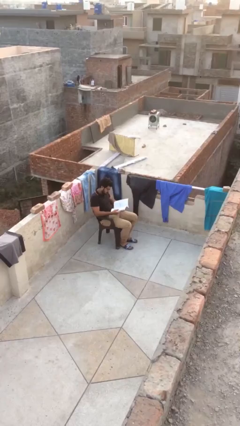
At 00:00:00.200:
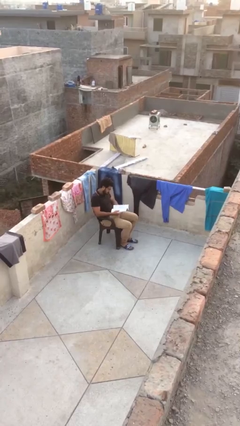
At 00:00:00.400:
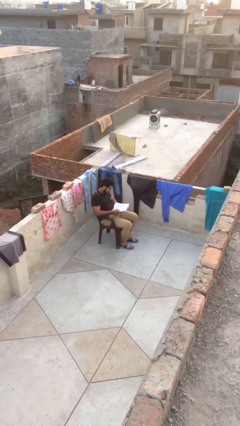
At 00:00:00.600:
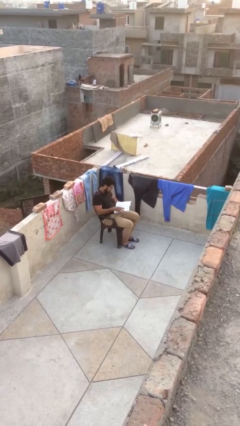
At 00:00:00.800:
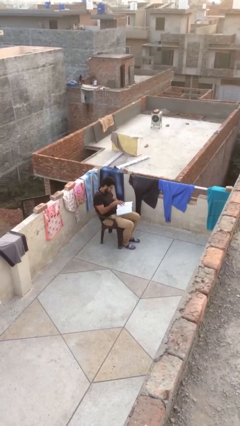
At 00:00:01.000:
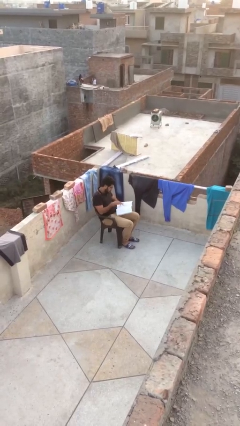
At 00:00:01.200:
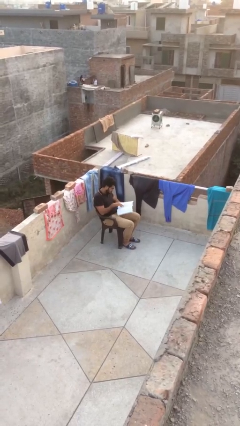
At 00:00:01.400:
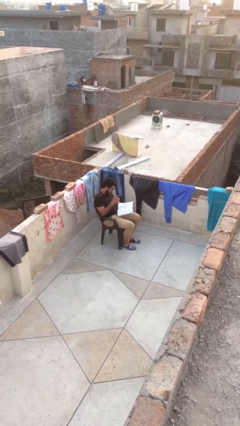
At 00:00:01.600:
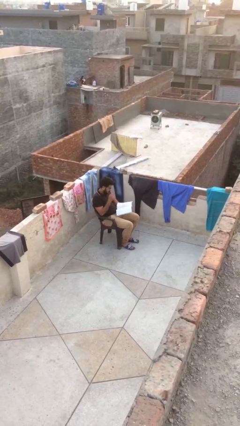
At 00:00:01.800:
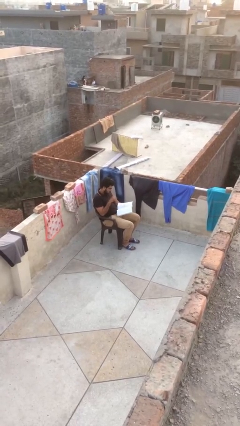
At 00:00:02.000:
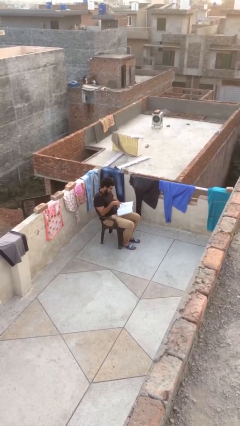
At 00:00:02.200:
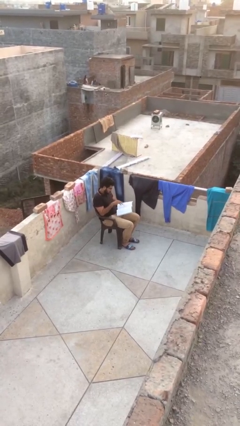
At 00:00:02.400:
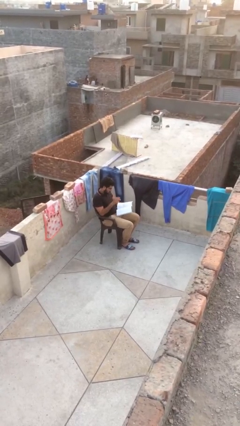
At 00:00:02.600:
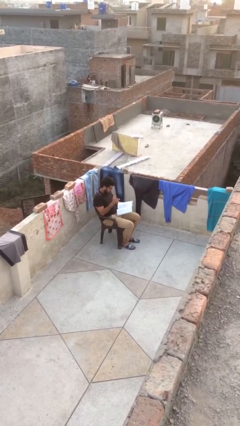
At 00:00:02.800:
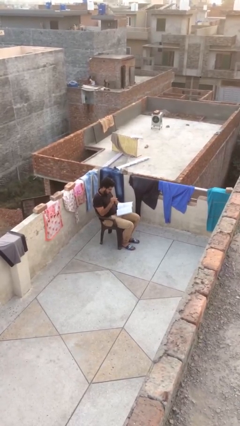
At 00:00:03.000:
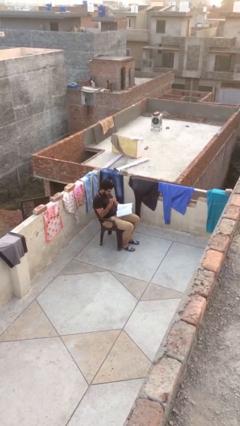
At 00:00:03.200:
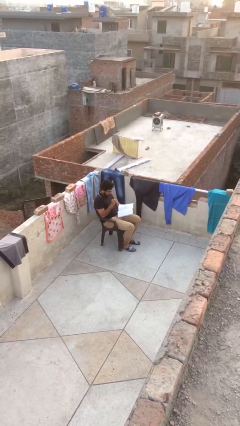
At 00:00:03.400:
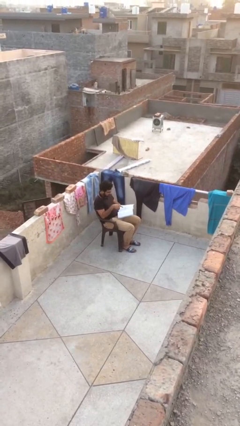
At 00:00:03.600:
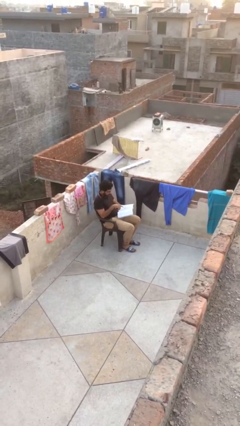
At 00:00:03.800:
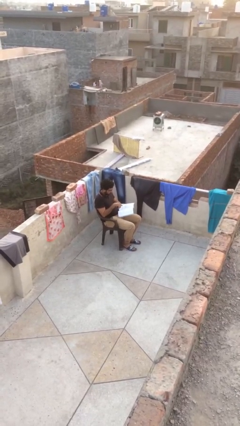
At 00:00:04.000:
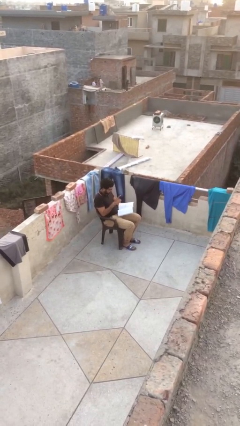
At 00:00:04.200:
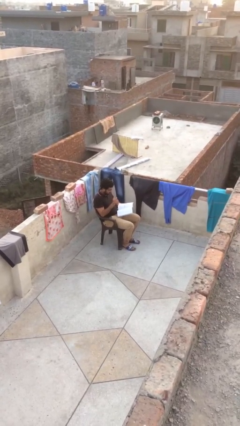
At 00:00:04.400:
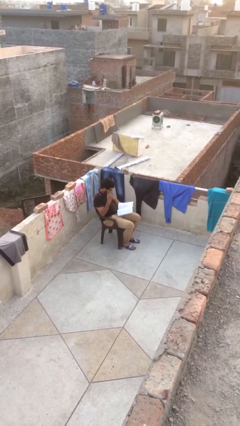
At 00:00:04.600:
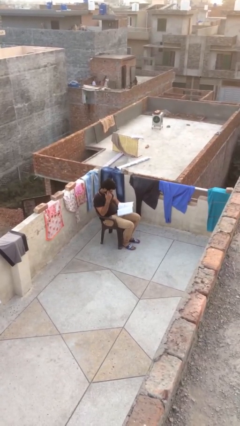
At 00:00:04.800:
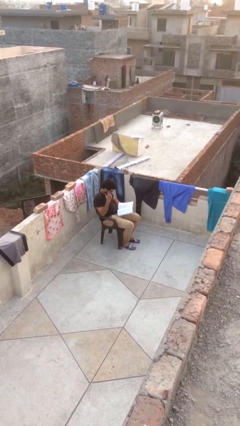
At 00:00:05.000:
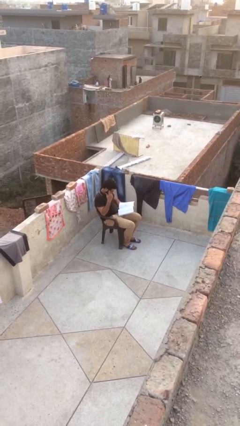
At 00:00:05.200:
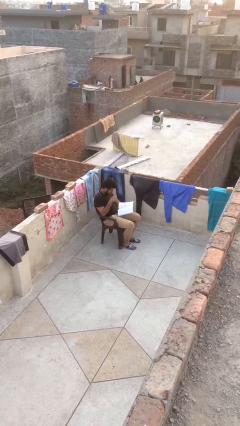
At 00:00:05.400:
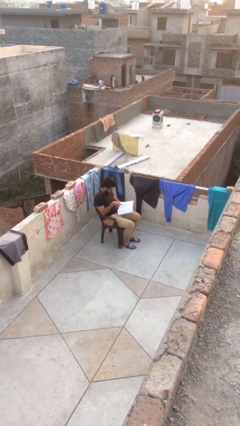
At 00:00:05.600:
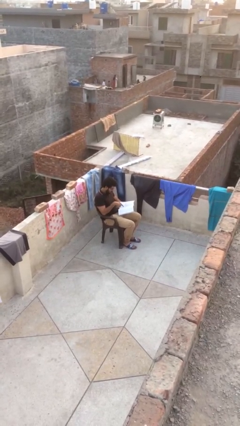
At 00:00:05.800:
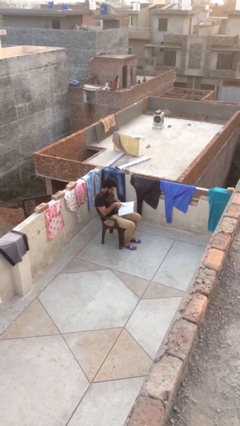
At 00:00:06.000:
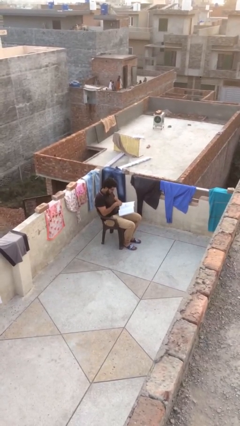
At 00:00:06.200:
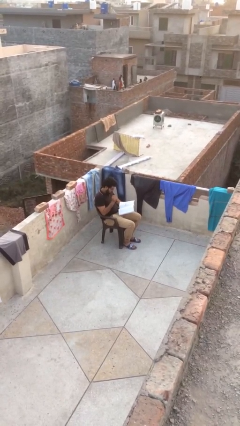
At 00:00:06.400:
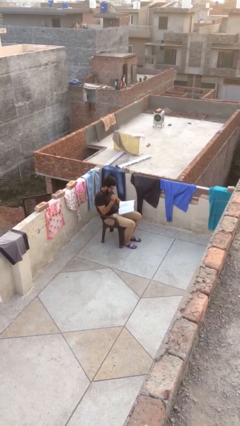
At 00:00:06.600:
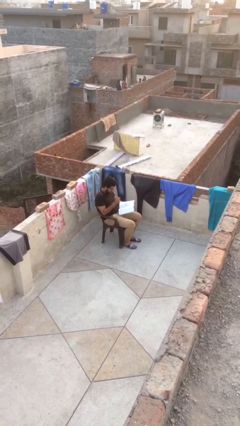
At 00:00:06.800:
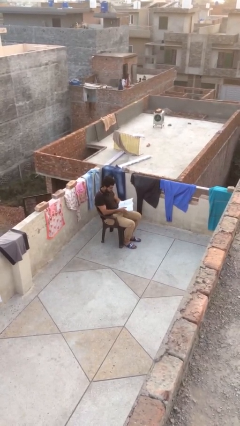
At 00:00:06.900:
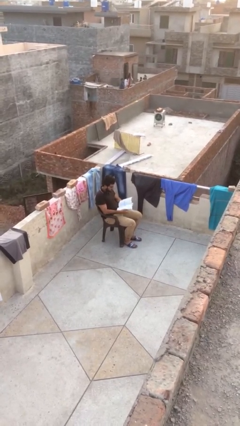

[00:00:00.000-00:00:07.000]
person reads document

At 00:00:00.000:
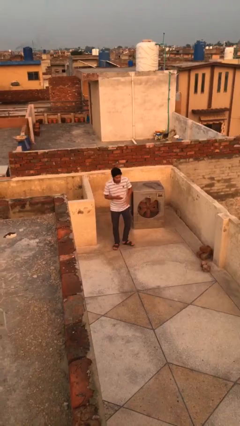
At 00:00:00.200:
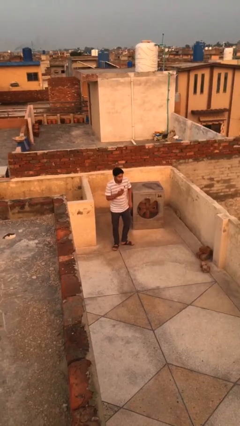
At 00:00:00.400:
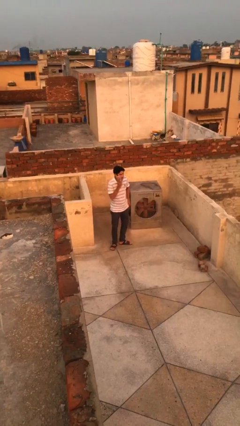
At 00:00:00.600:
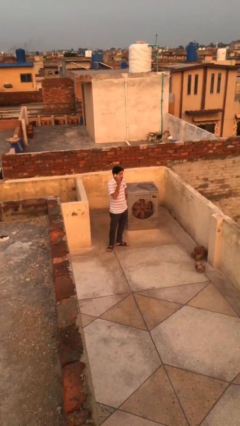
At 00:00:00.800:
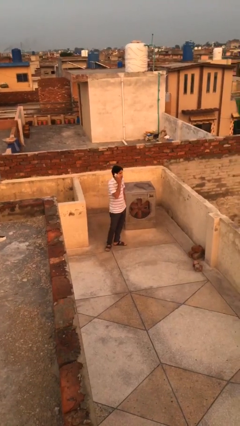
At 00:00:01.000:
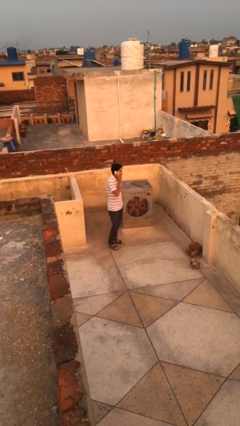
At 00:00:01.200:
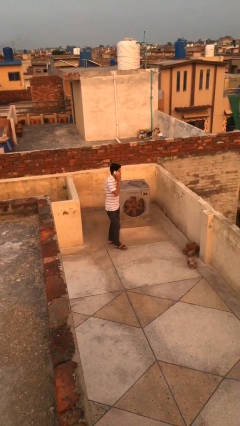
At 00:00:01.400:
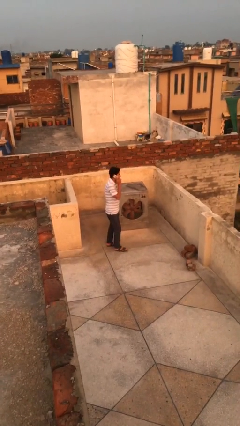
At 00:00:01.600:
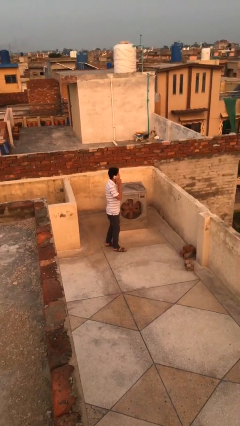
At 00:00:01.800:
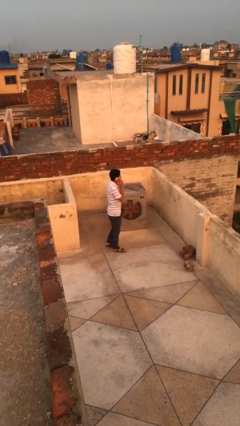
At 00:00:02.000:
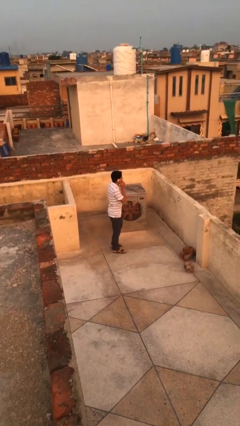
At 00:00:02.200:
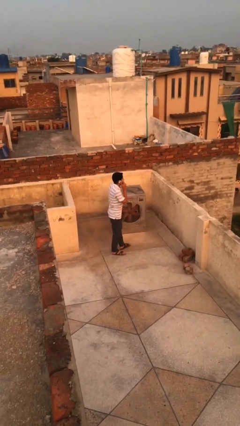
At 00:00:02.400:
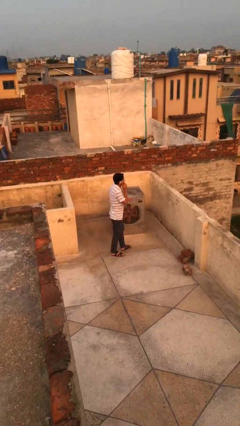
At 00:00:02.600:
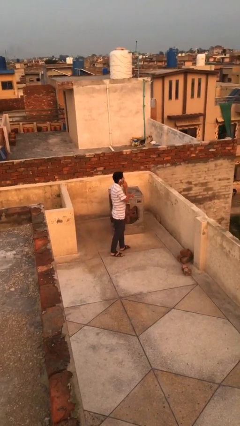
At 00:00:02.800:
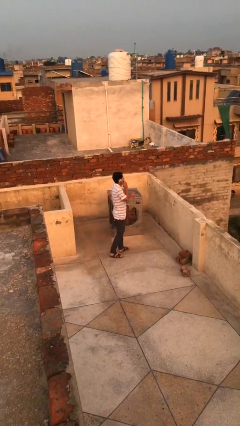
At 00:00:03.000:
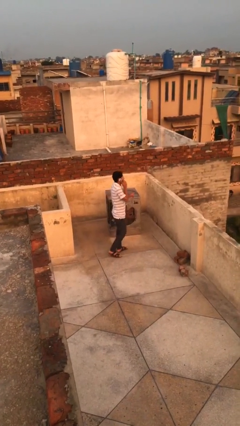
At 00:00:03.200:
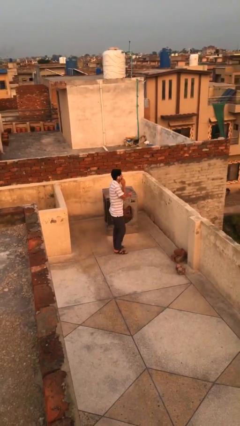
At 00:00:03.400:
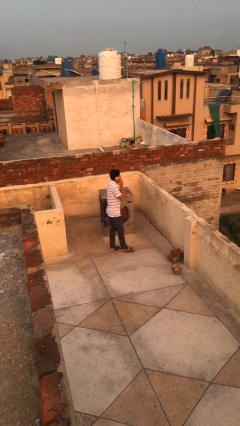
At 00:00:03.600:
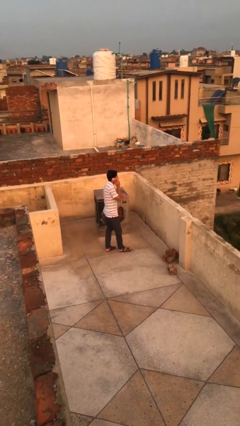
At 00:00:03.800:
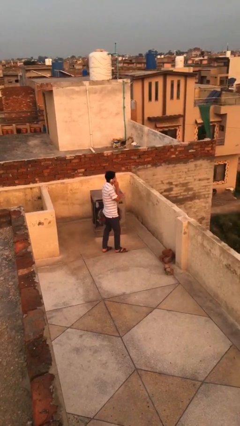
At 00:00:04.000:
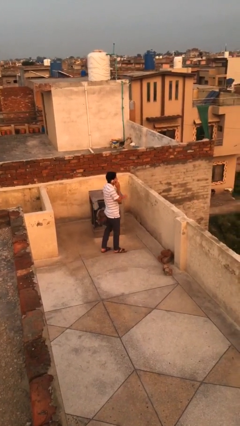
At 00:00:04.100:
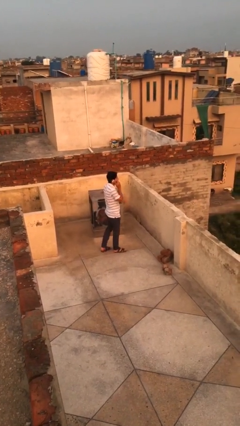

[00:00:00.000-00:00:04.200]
person talks on phone

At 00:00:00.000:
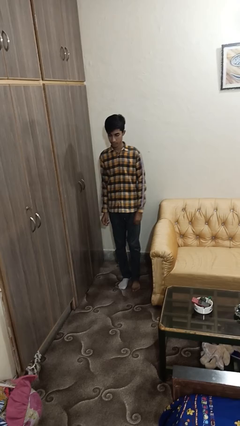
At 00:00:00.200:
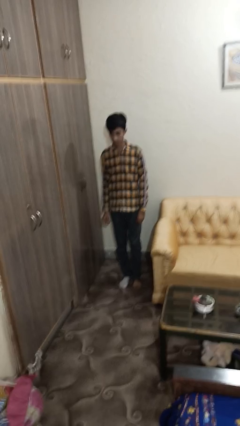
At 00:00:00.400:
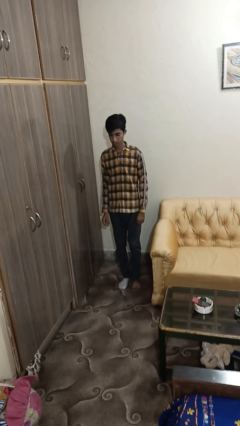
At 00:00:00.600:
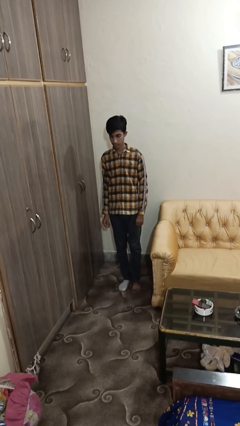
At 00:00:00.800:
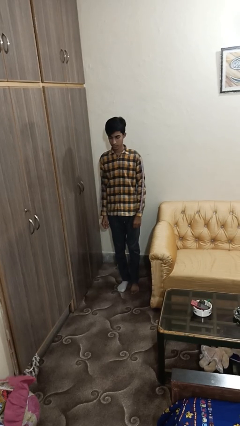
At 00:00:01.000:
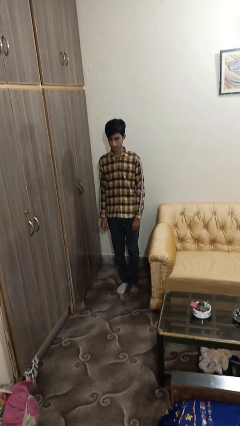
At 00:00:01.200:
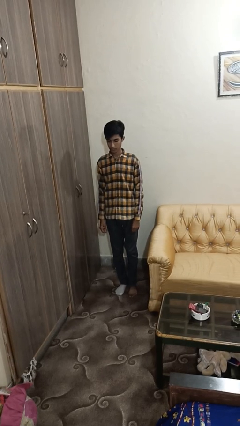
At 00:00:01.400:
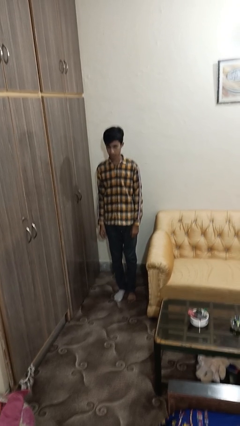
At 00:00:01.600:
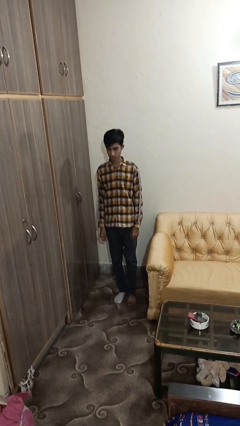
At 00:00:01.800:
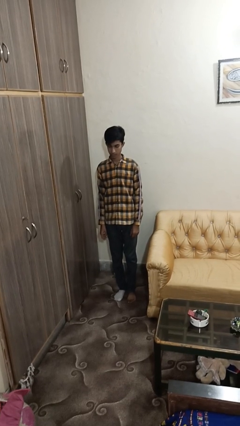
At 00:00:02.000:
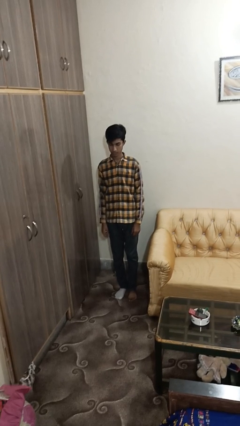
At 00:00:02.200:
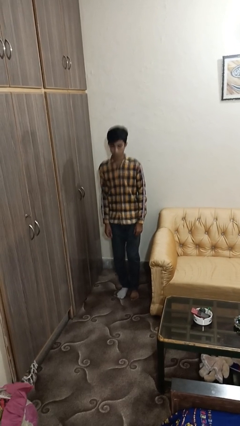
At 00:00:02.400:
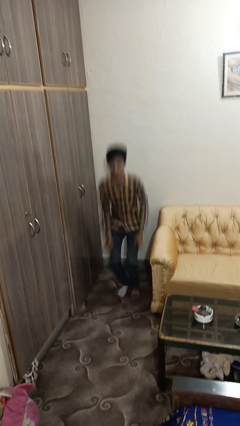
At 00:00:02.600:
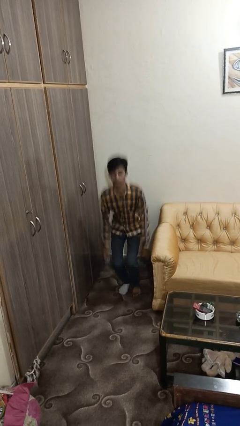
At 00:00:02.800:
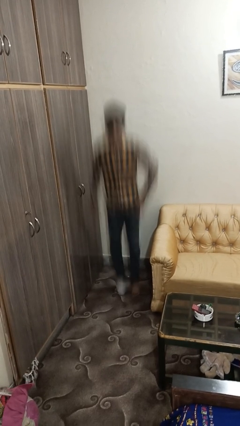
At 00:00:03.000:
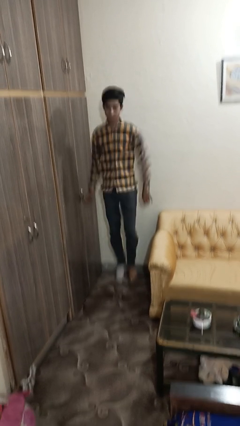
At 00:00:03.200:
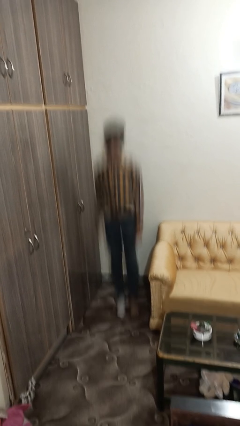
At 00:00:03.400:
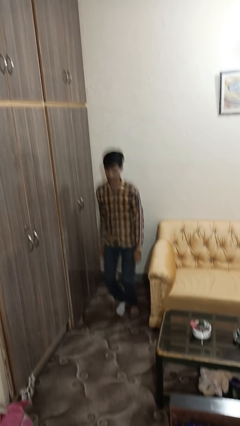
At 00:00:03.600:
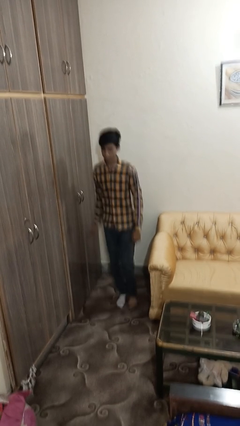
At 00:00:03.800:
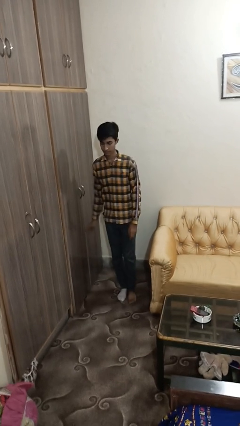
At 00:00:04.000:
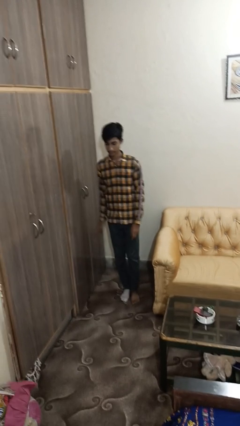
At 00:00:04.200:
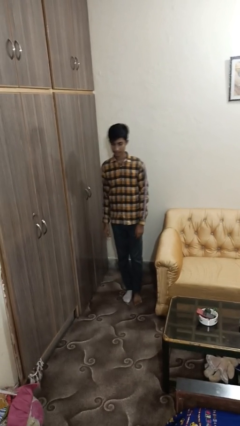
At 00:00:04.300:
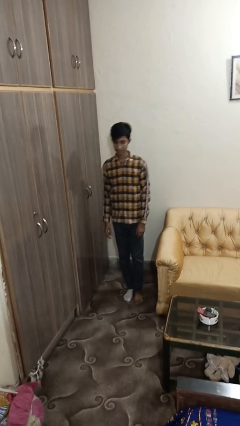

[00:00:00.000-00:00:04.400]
person jumps

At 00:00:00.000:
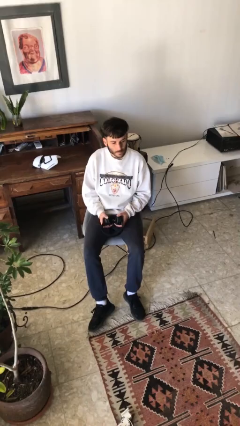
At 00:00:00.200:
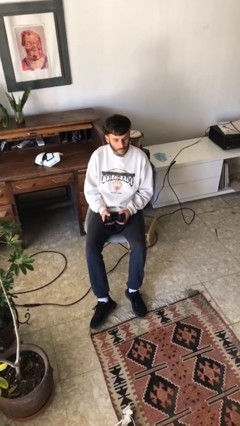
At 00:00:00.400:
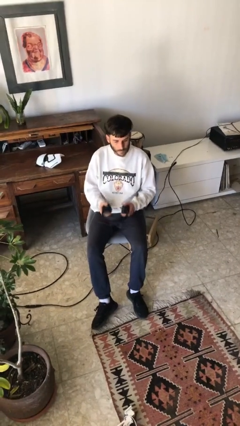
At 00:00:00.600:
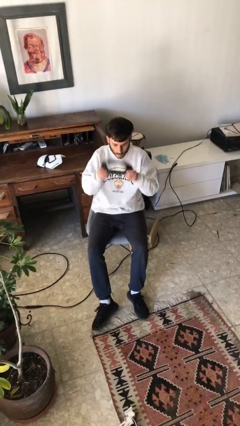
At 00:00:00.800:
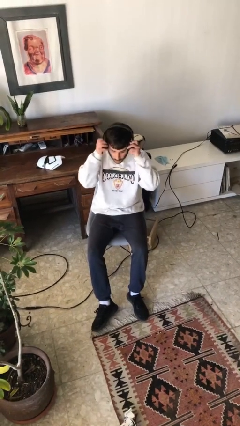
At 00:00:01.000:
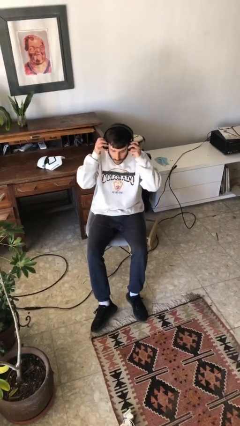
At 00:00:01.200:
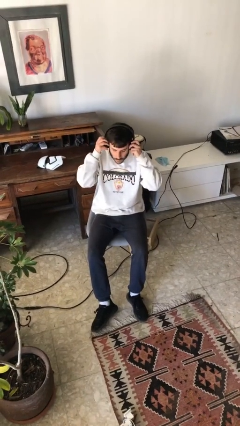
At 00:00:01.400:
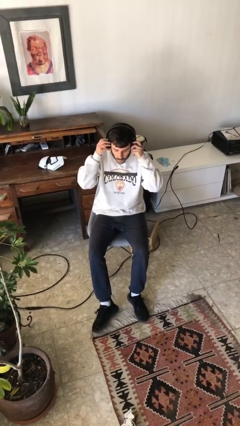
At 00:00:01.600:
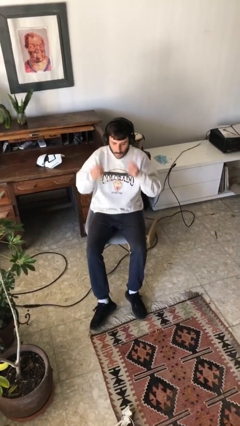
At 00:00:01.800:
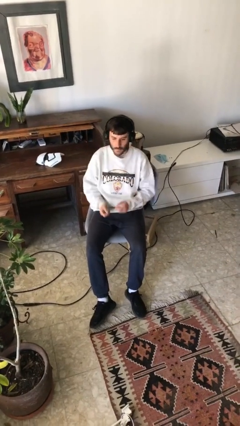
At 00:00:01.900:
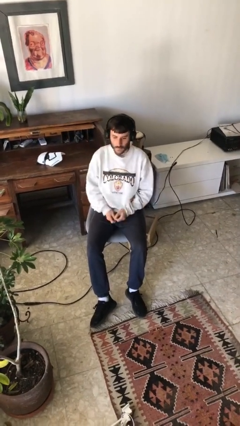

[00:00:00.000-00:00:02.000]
person puts on headphones

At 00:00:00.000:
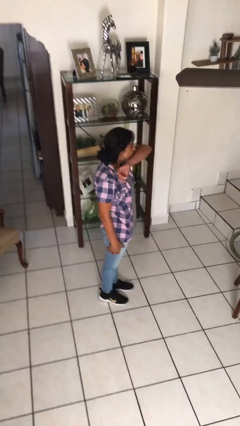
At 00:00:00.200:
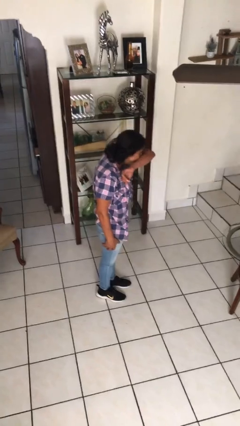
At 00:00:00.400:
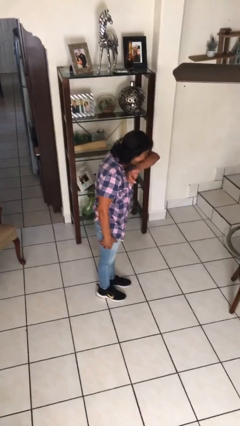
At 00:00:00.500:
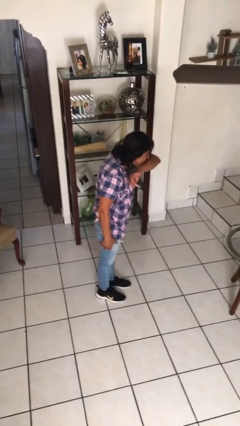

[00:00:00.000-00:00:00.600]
person sneezes into arm
